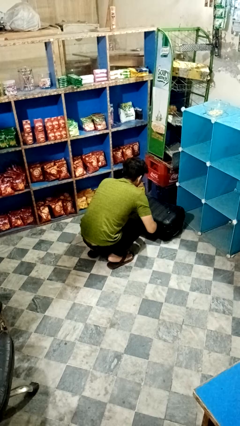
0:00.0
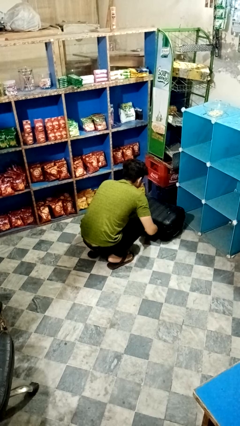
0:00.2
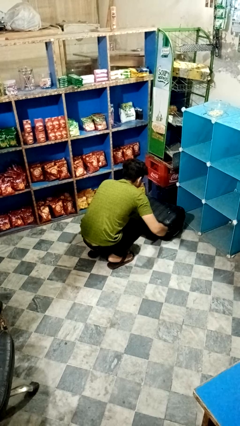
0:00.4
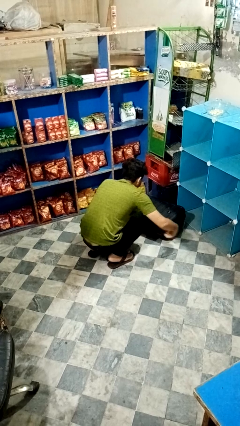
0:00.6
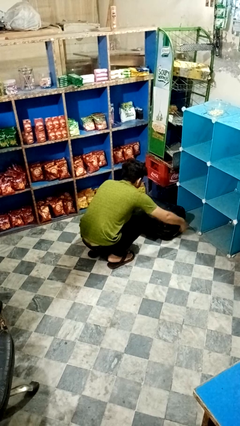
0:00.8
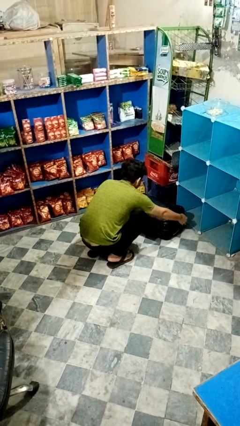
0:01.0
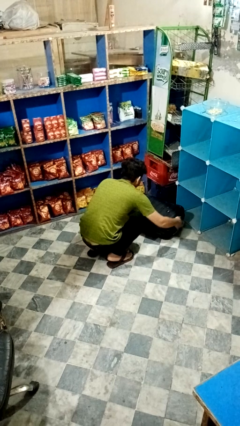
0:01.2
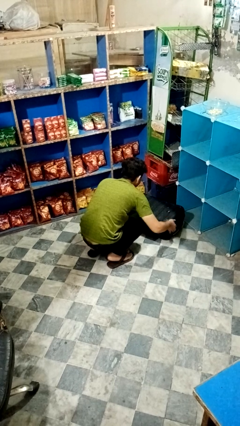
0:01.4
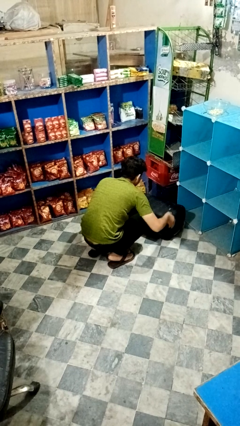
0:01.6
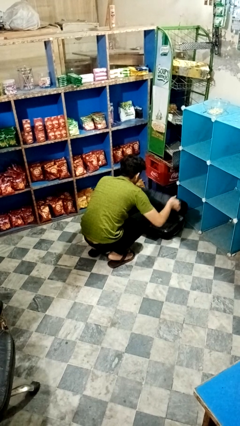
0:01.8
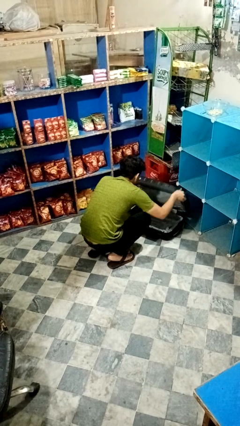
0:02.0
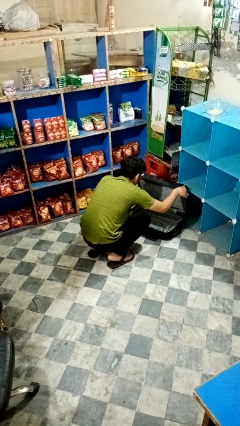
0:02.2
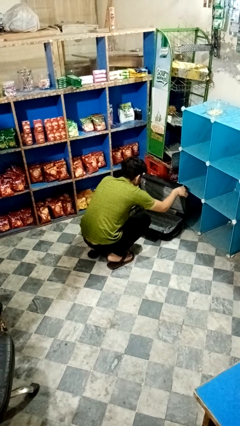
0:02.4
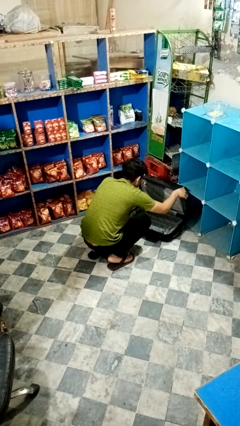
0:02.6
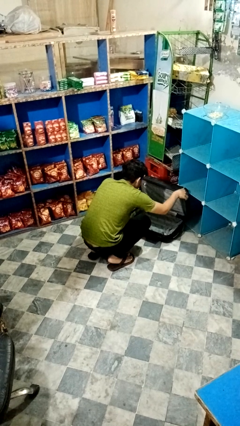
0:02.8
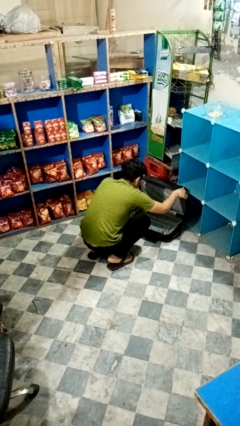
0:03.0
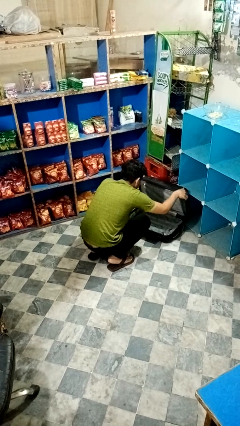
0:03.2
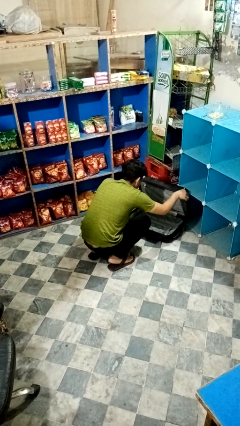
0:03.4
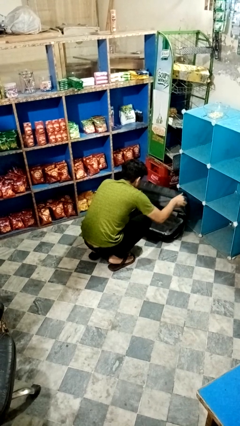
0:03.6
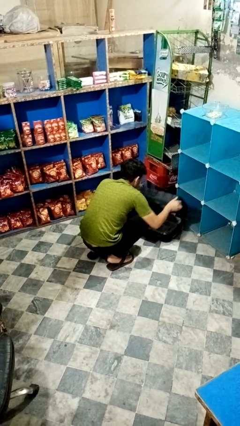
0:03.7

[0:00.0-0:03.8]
person opens suitcase

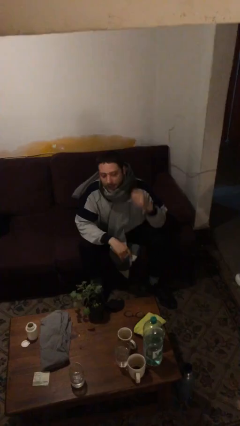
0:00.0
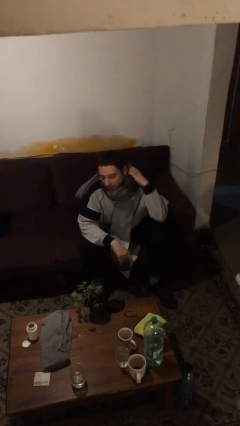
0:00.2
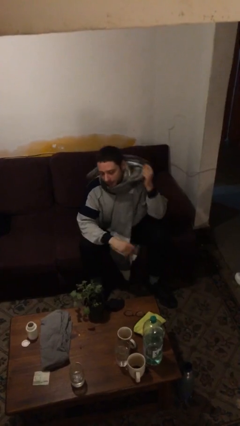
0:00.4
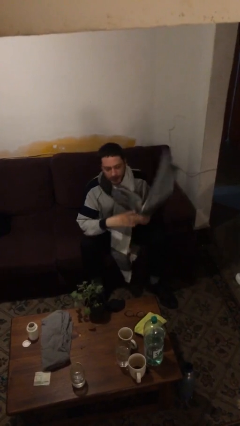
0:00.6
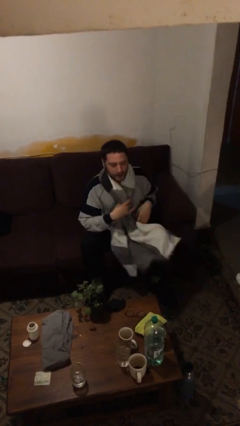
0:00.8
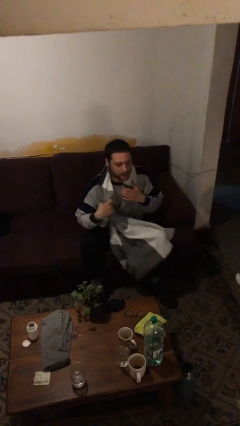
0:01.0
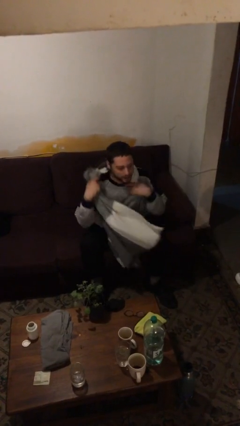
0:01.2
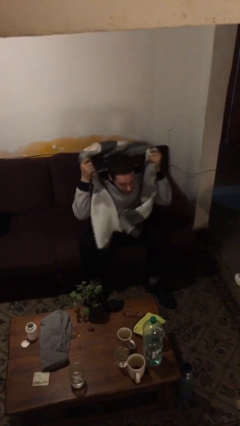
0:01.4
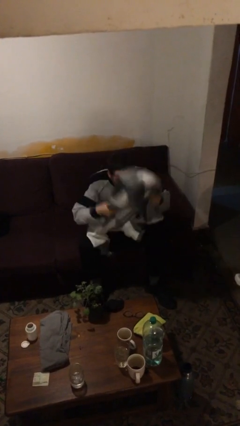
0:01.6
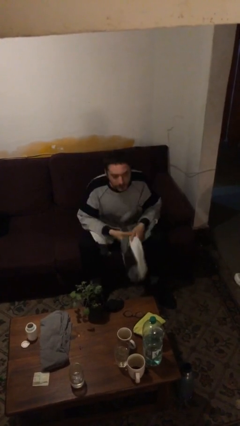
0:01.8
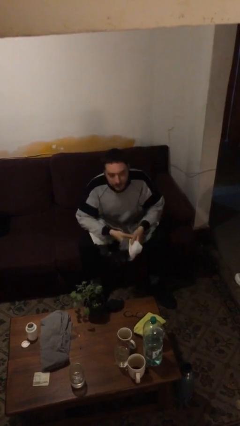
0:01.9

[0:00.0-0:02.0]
person takes off scarf

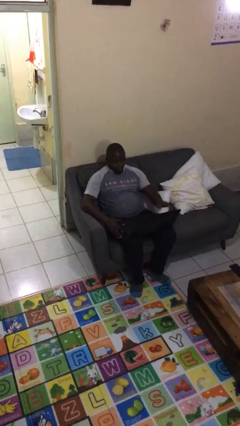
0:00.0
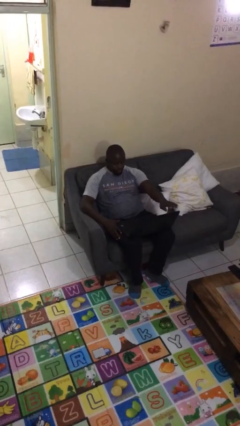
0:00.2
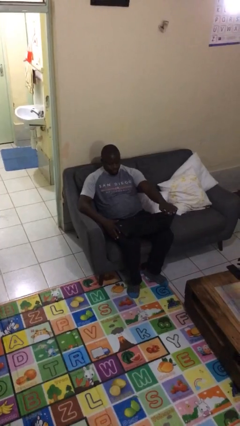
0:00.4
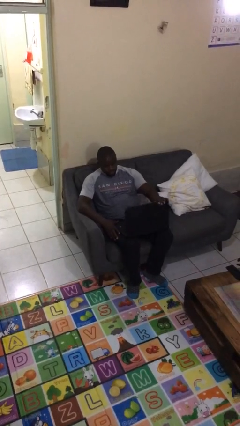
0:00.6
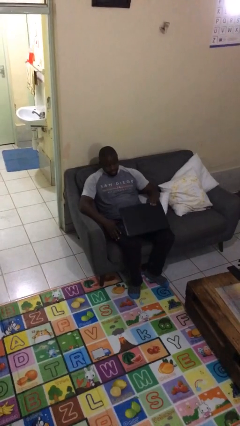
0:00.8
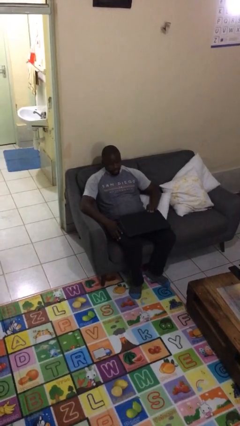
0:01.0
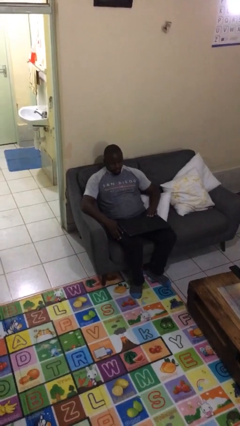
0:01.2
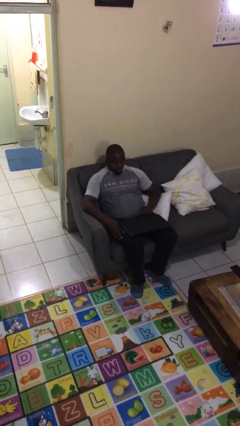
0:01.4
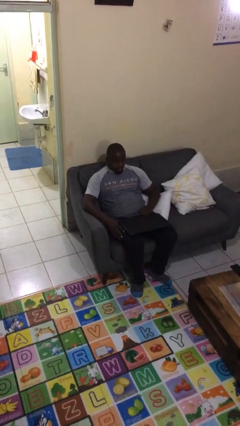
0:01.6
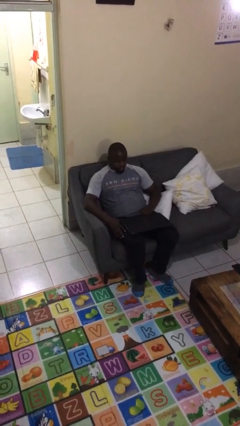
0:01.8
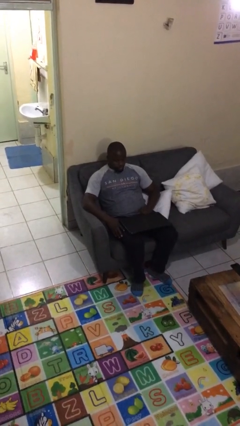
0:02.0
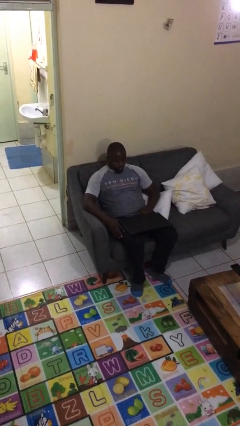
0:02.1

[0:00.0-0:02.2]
person closes laptop

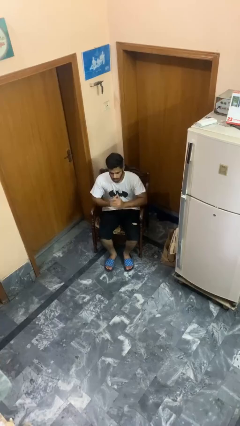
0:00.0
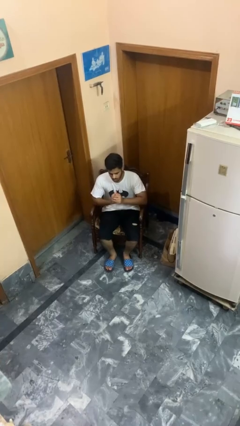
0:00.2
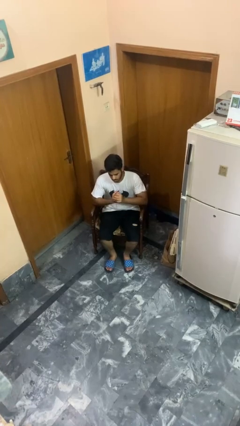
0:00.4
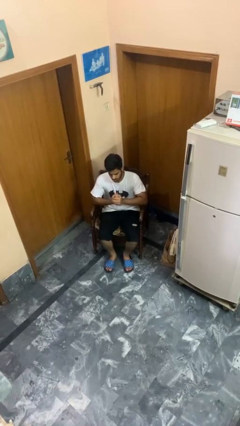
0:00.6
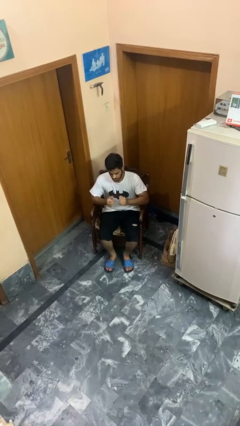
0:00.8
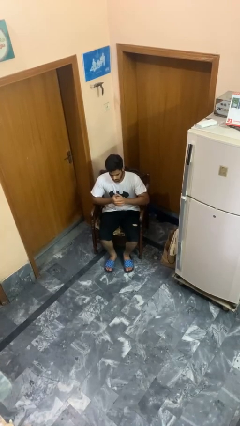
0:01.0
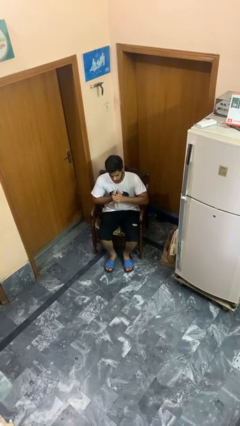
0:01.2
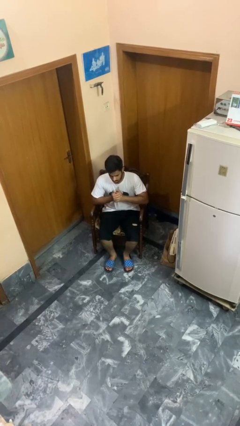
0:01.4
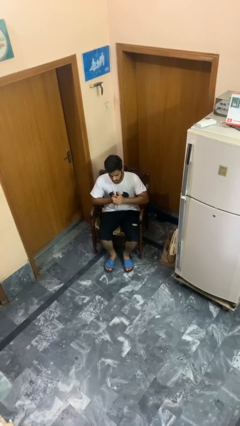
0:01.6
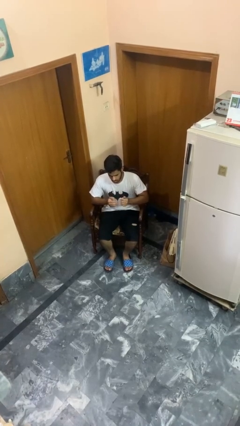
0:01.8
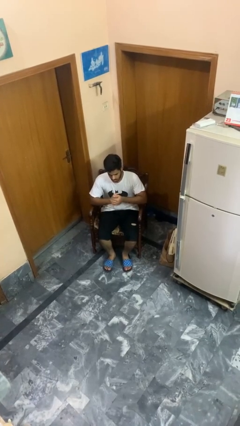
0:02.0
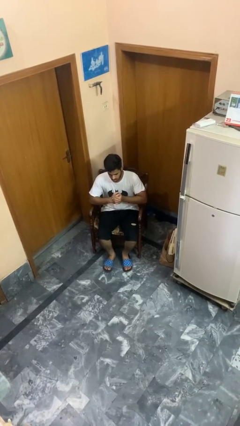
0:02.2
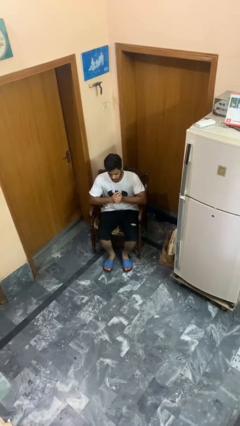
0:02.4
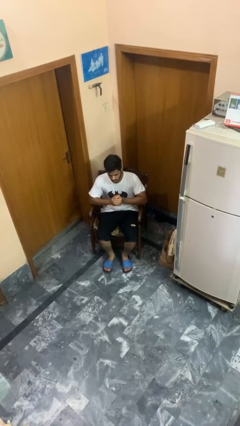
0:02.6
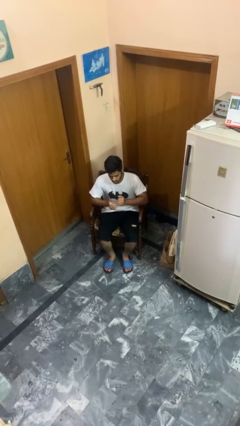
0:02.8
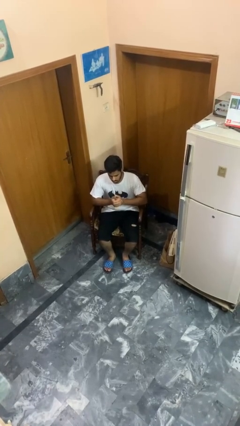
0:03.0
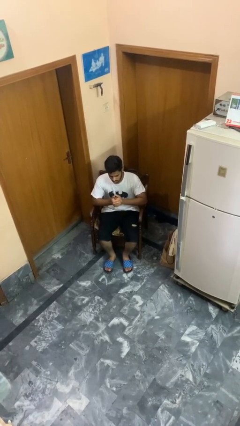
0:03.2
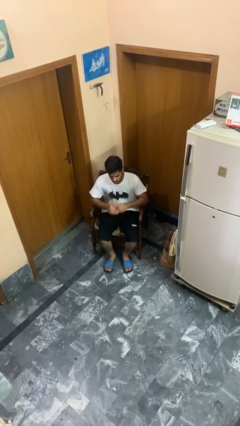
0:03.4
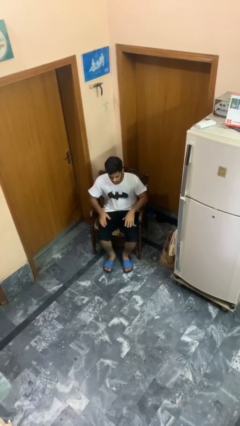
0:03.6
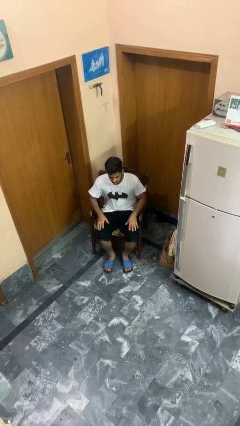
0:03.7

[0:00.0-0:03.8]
person cracks knuckles

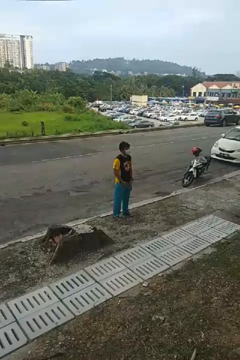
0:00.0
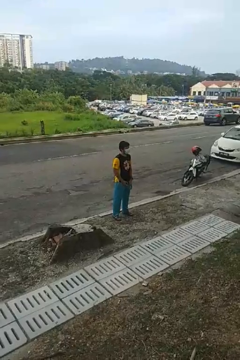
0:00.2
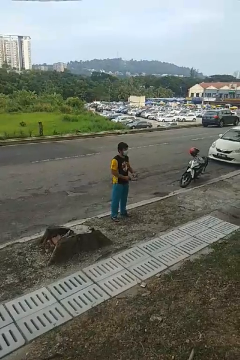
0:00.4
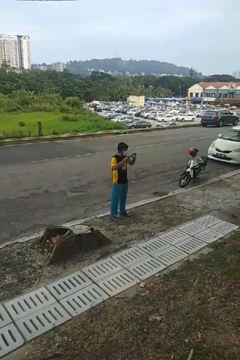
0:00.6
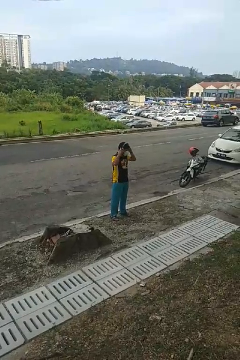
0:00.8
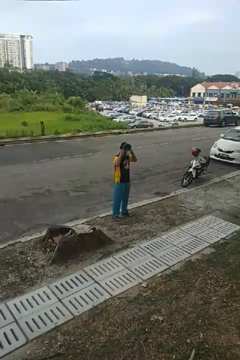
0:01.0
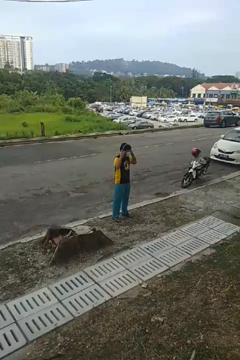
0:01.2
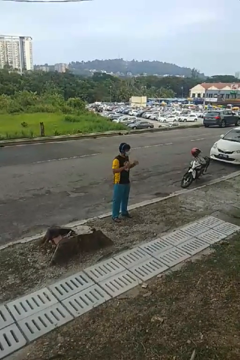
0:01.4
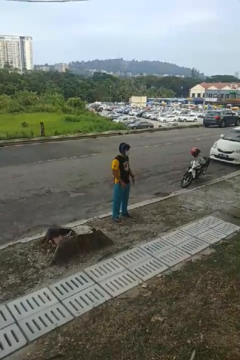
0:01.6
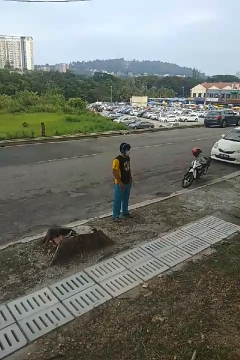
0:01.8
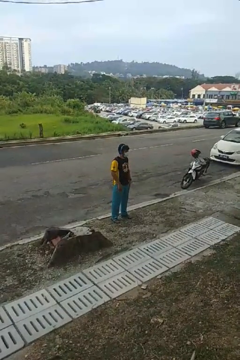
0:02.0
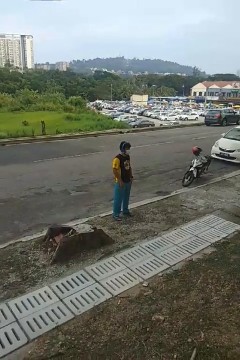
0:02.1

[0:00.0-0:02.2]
person puts on headphones

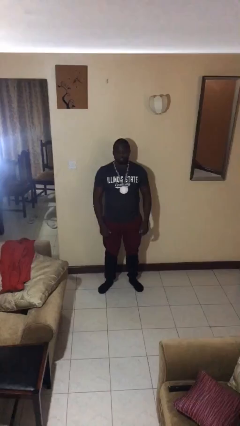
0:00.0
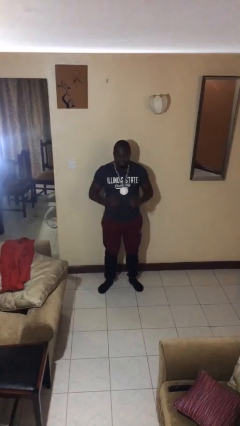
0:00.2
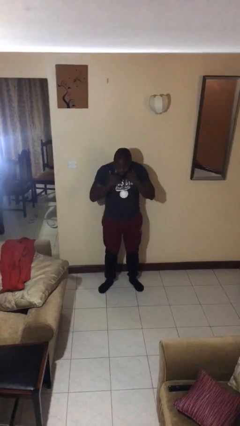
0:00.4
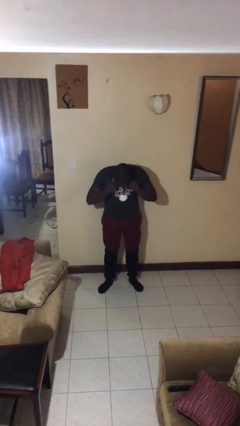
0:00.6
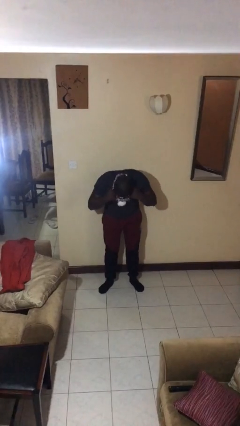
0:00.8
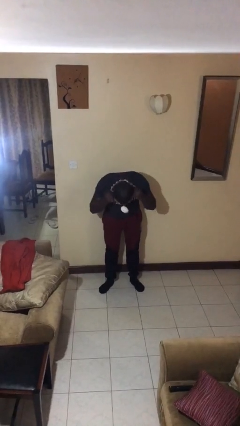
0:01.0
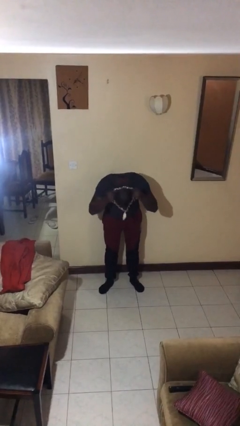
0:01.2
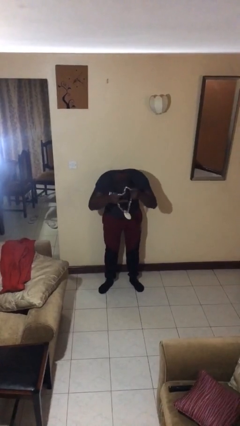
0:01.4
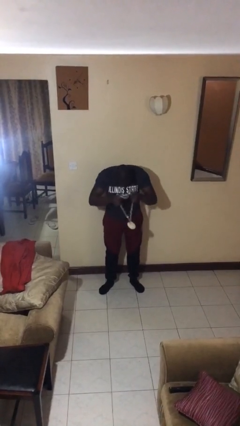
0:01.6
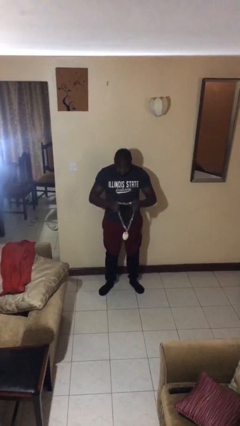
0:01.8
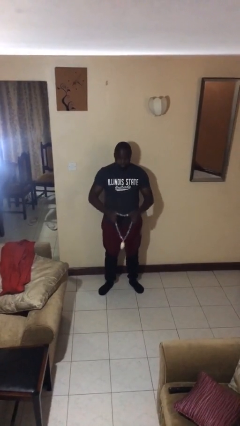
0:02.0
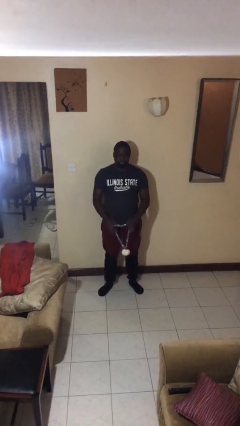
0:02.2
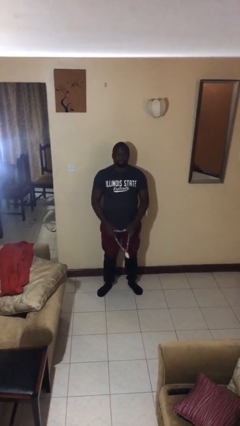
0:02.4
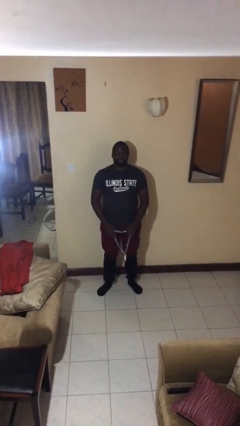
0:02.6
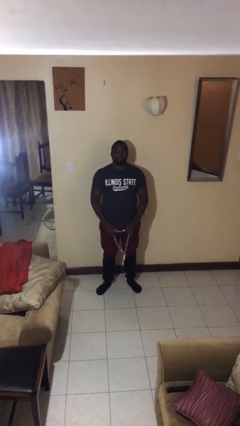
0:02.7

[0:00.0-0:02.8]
person takes off necklace

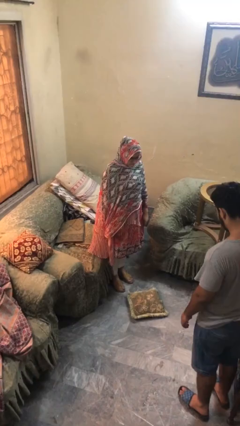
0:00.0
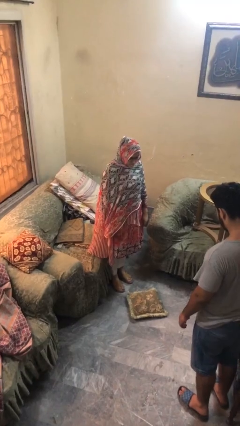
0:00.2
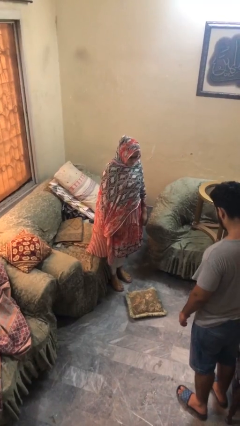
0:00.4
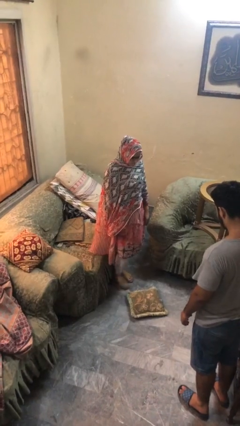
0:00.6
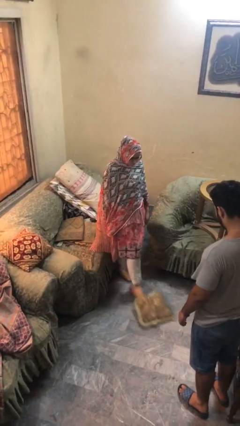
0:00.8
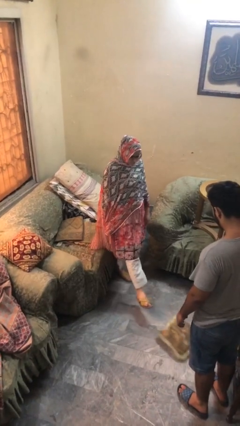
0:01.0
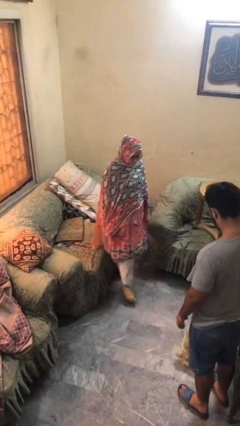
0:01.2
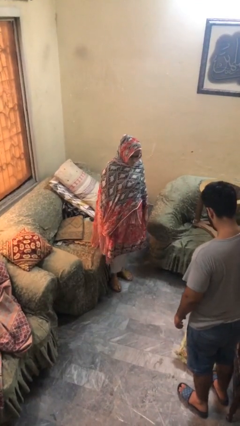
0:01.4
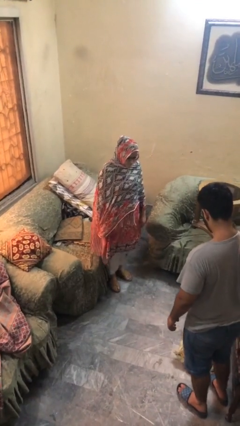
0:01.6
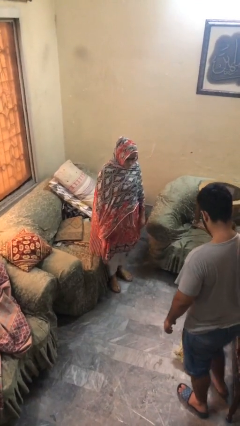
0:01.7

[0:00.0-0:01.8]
person kicks object to person
